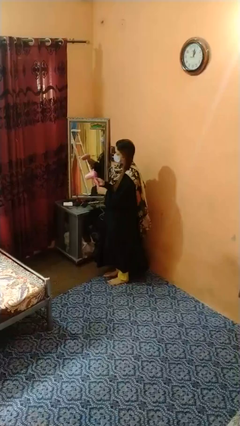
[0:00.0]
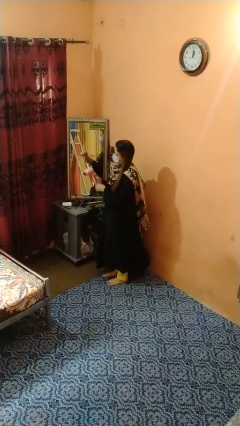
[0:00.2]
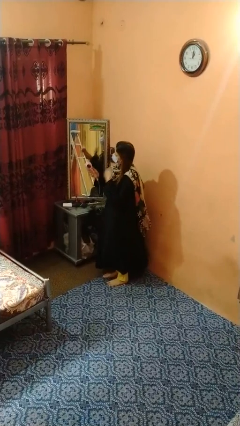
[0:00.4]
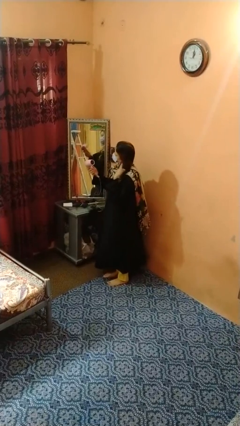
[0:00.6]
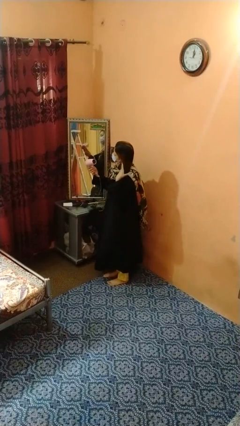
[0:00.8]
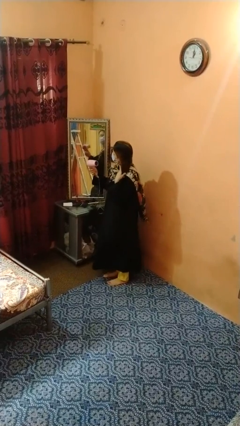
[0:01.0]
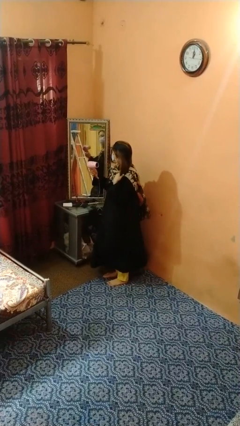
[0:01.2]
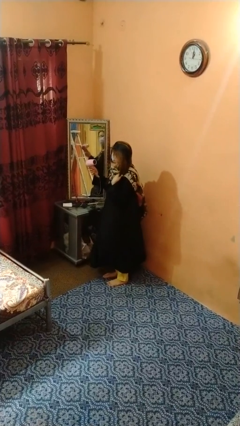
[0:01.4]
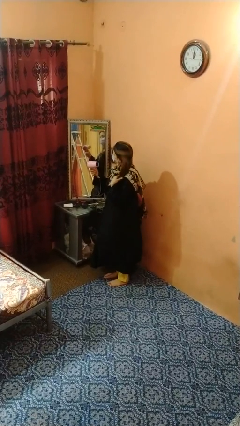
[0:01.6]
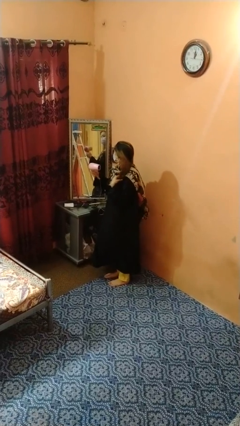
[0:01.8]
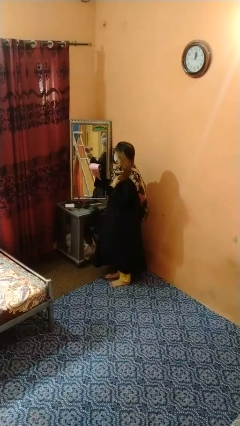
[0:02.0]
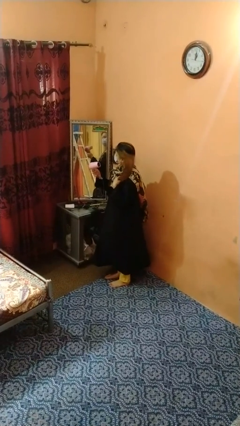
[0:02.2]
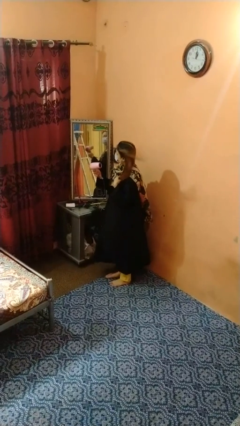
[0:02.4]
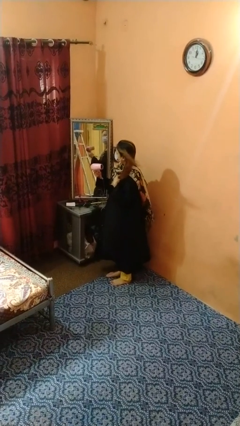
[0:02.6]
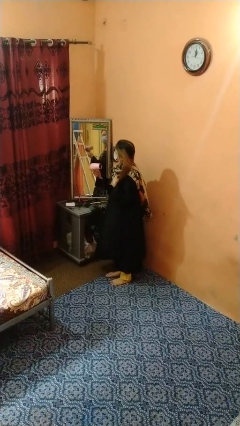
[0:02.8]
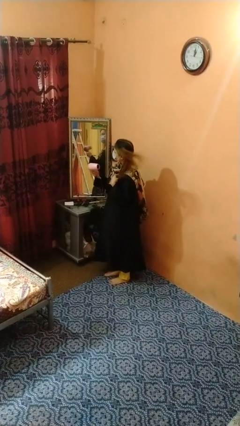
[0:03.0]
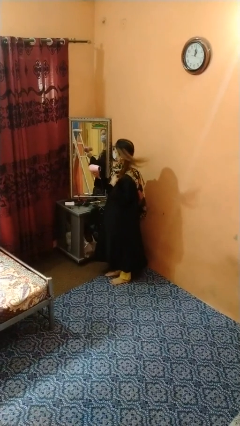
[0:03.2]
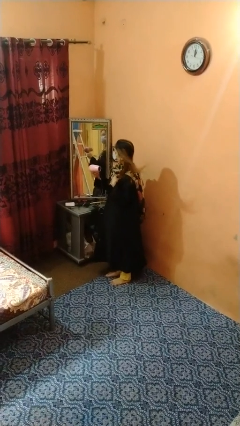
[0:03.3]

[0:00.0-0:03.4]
person dries hair with hairdryer

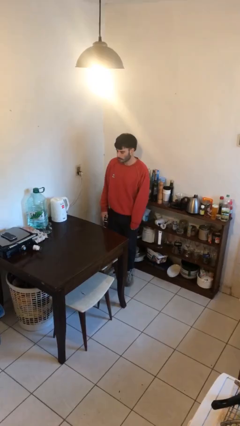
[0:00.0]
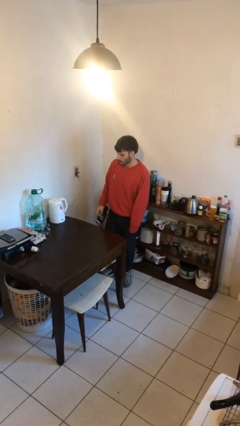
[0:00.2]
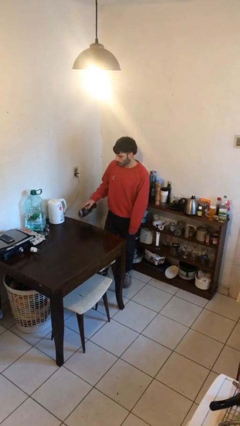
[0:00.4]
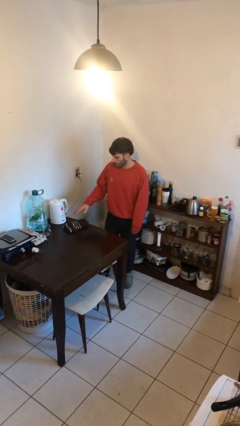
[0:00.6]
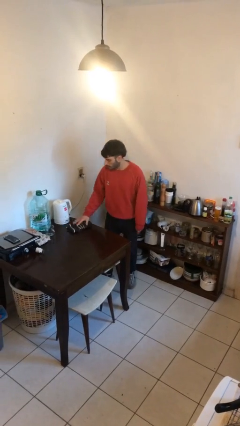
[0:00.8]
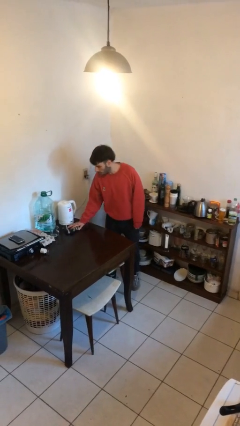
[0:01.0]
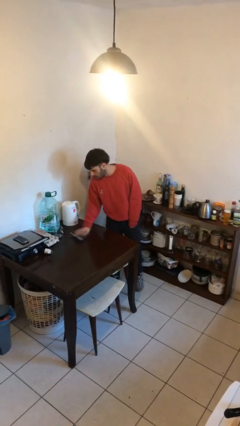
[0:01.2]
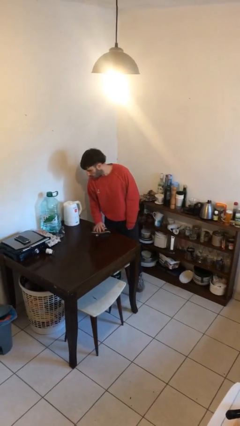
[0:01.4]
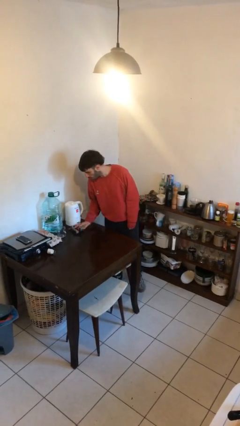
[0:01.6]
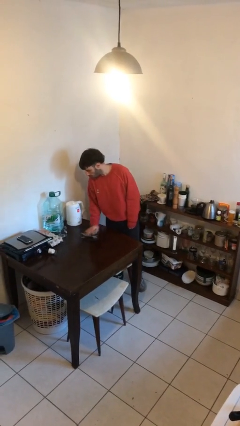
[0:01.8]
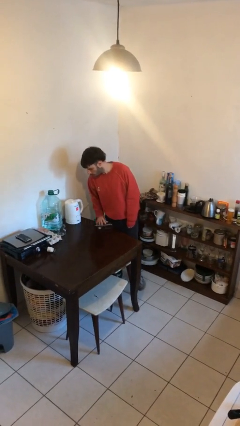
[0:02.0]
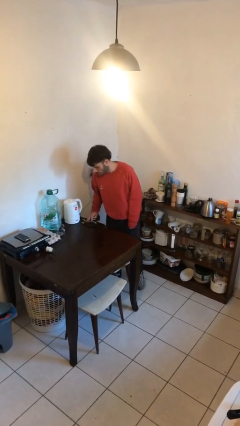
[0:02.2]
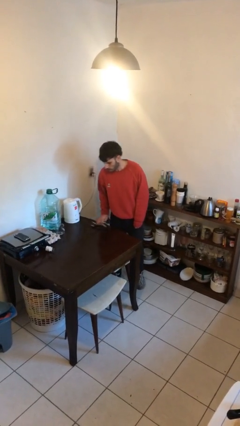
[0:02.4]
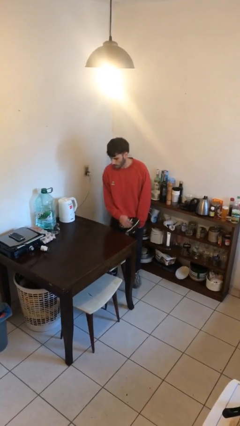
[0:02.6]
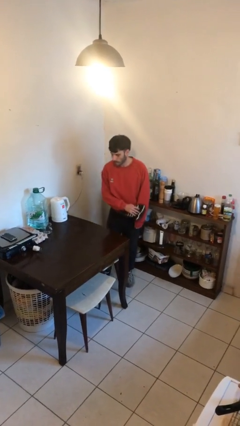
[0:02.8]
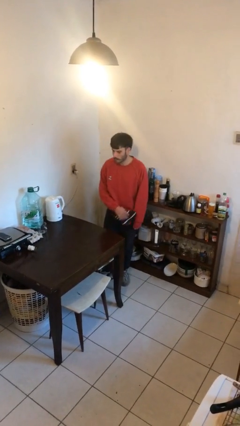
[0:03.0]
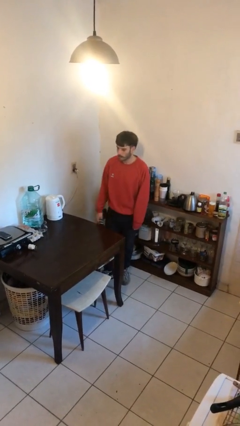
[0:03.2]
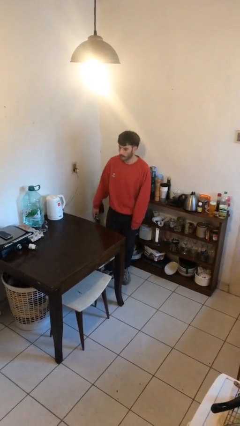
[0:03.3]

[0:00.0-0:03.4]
person cleans table with rag

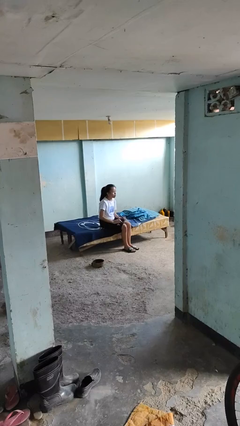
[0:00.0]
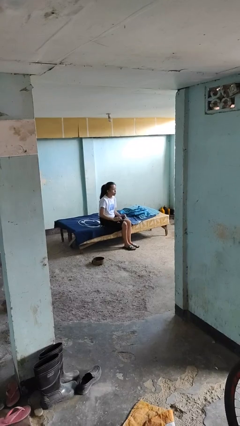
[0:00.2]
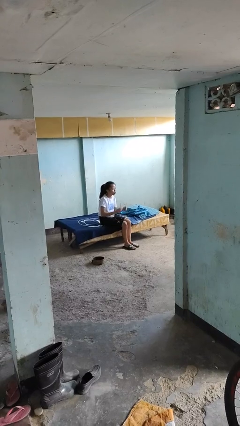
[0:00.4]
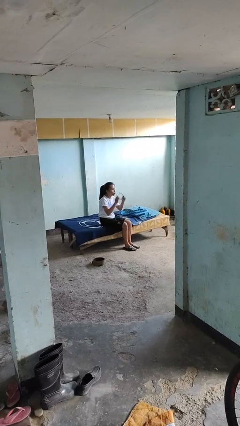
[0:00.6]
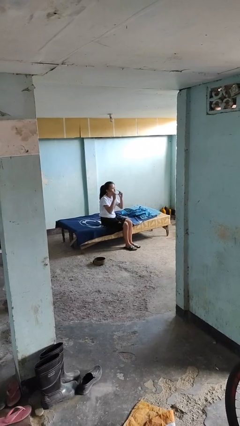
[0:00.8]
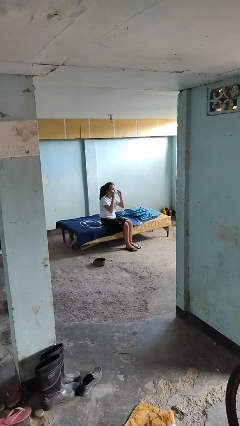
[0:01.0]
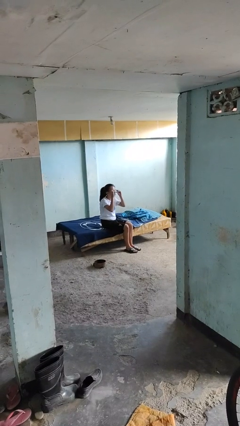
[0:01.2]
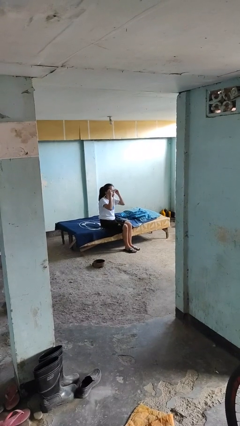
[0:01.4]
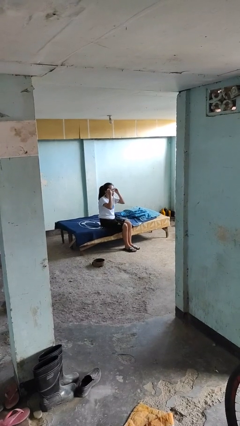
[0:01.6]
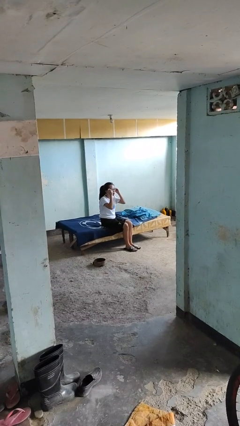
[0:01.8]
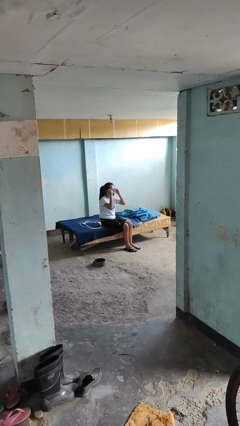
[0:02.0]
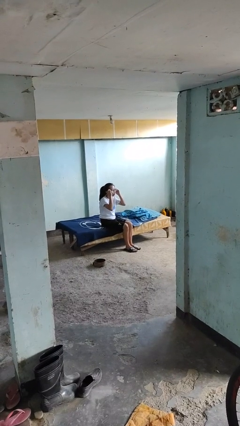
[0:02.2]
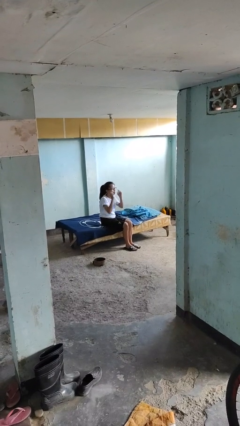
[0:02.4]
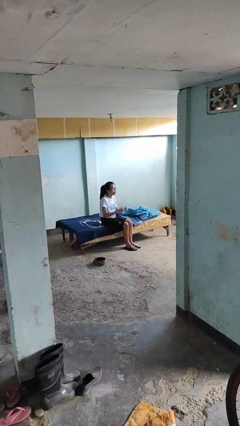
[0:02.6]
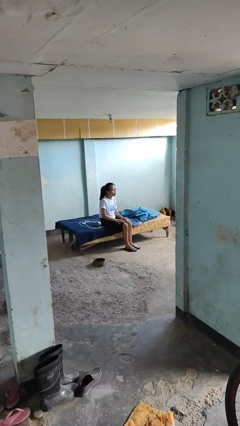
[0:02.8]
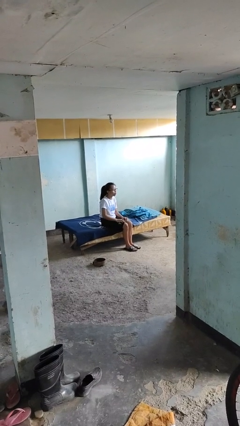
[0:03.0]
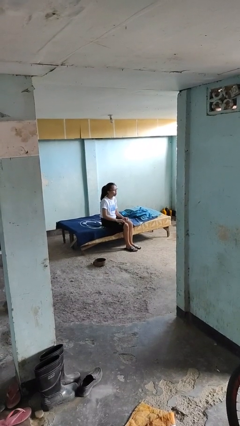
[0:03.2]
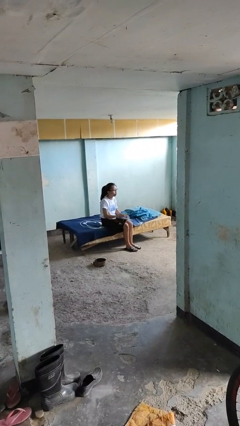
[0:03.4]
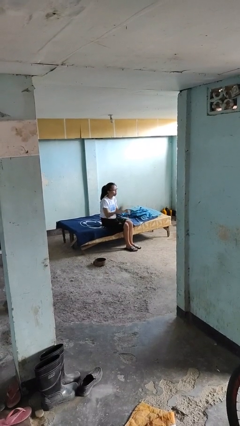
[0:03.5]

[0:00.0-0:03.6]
person puts on glasses

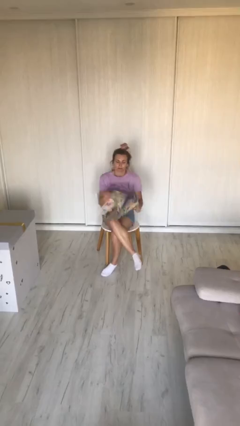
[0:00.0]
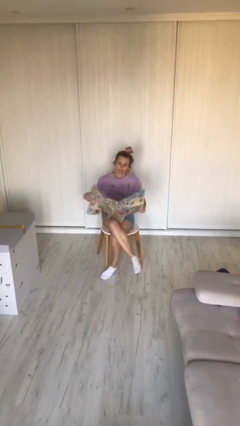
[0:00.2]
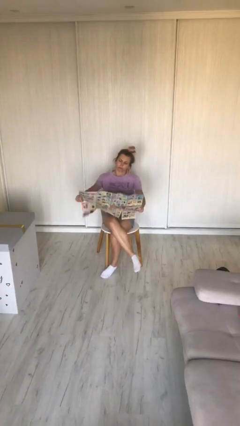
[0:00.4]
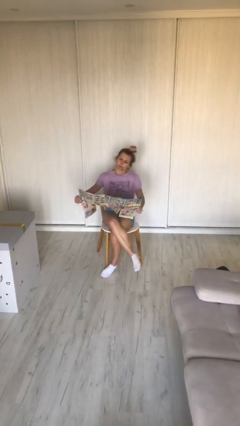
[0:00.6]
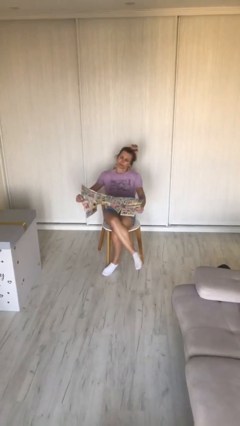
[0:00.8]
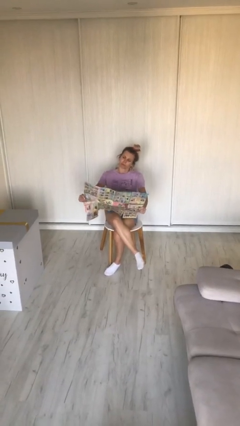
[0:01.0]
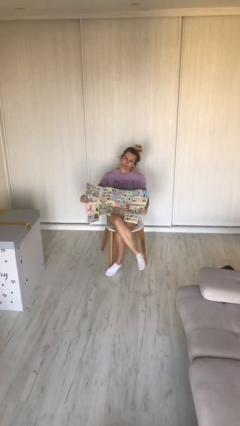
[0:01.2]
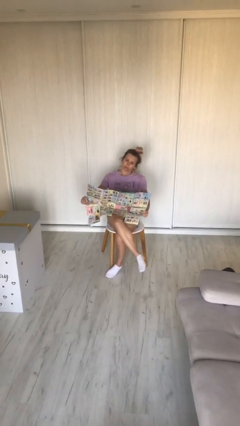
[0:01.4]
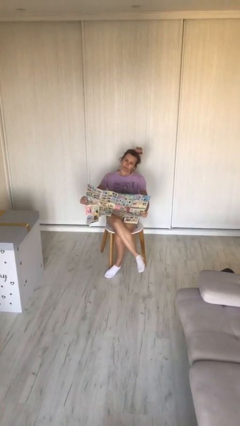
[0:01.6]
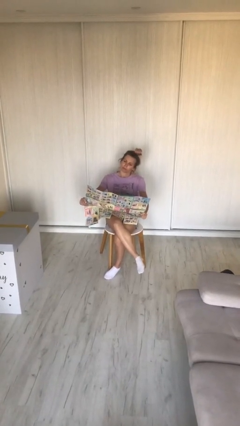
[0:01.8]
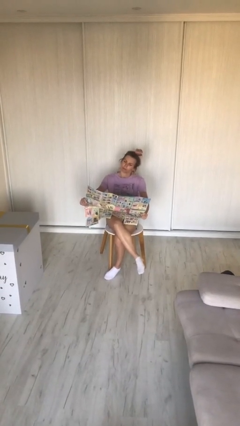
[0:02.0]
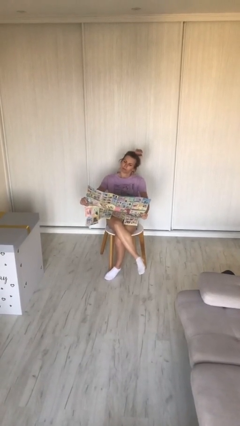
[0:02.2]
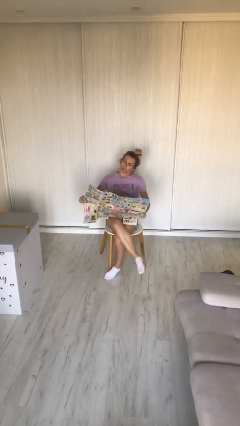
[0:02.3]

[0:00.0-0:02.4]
person reads newspaper

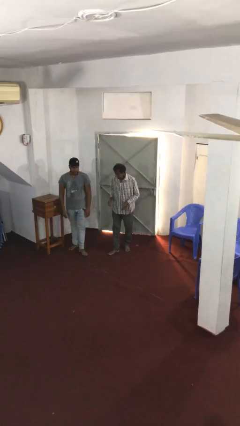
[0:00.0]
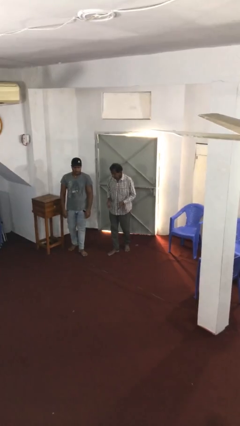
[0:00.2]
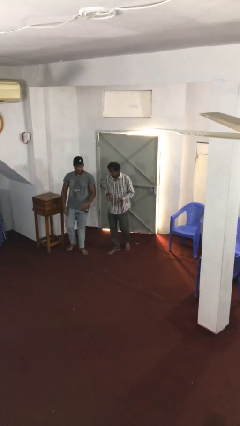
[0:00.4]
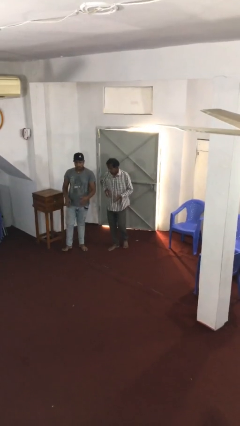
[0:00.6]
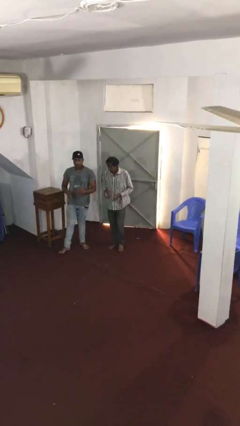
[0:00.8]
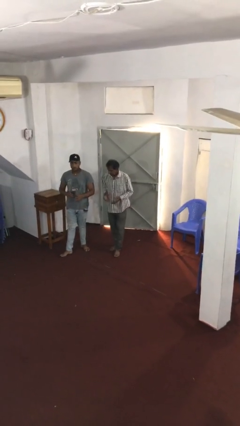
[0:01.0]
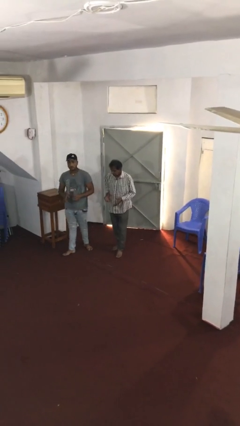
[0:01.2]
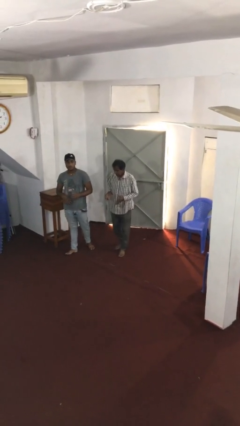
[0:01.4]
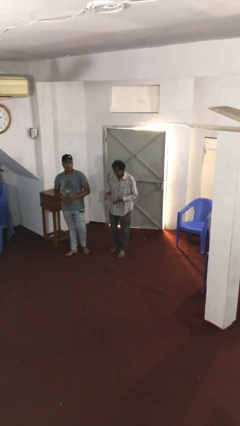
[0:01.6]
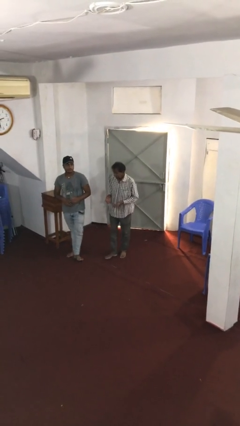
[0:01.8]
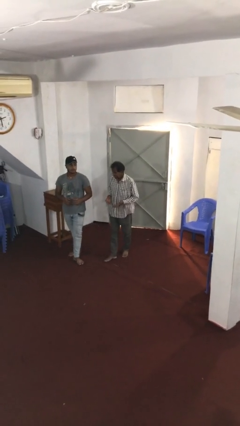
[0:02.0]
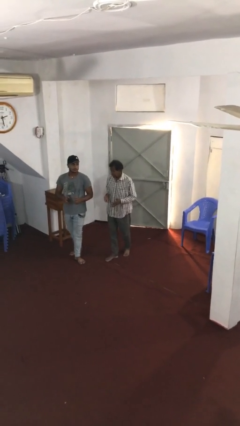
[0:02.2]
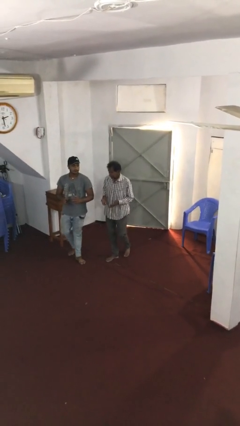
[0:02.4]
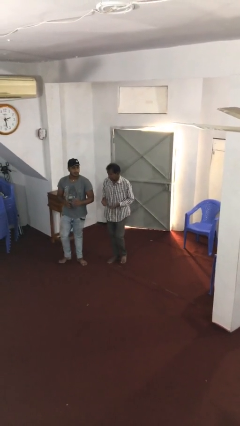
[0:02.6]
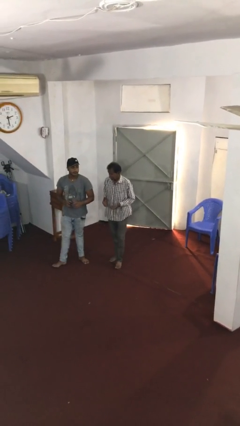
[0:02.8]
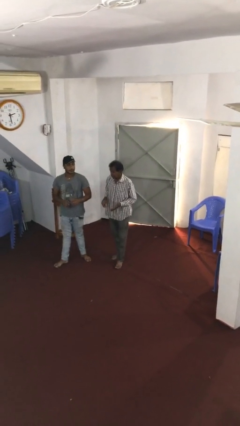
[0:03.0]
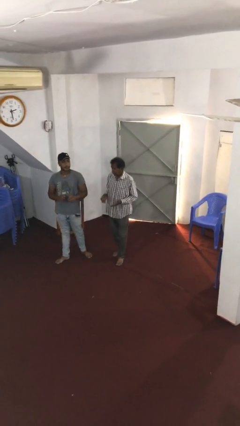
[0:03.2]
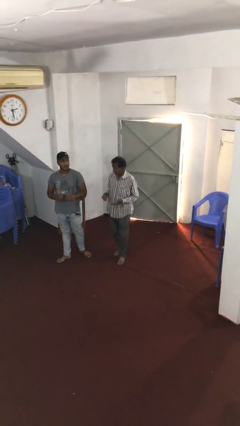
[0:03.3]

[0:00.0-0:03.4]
person talks to person

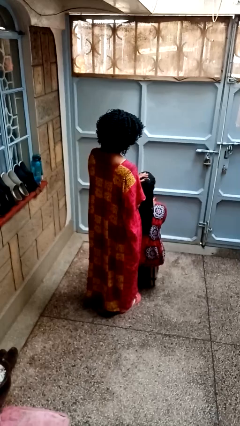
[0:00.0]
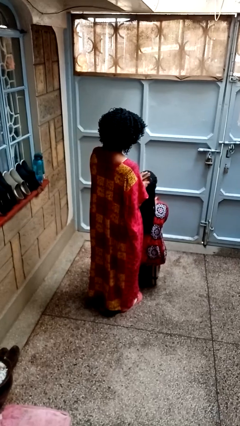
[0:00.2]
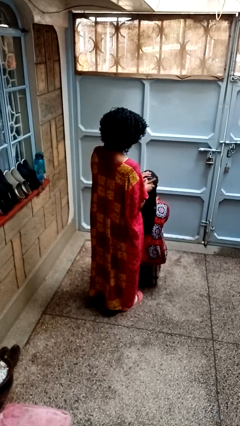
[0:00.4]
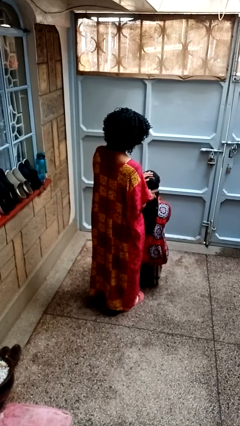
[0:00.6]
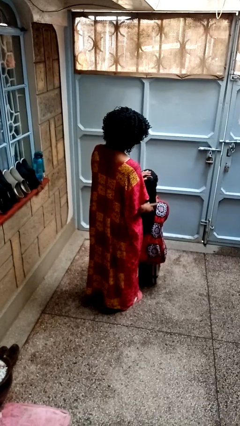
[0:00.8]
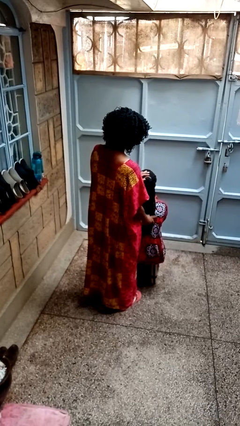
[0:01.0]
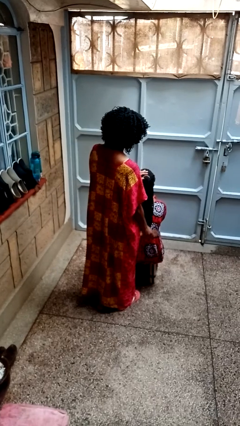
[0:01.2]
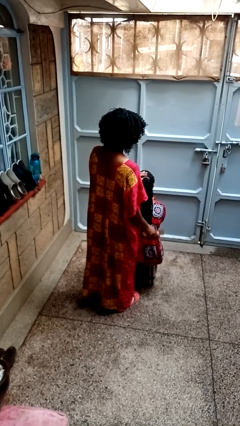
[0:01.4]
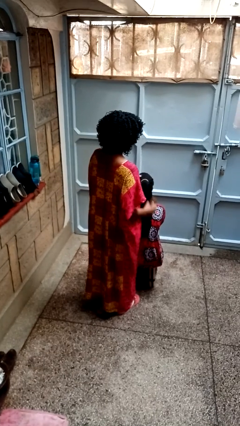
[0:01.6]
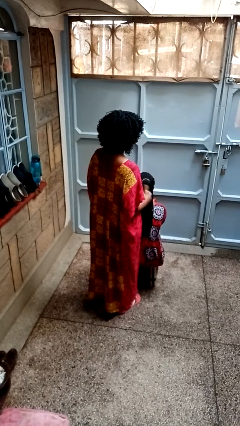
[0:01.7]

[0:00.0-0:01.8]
person brushes hair of person
